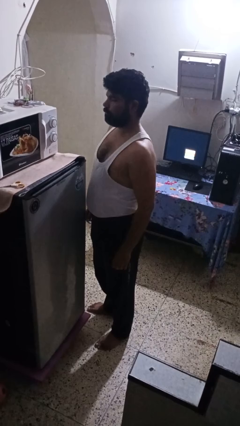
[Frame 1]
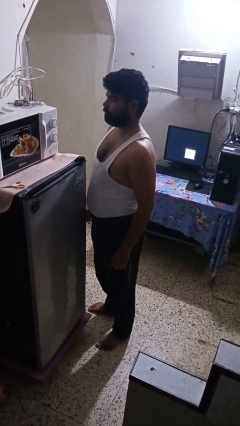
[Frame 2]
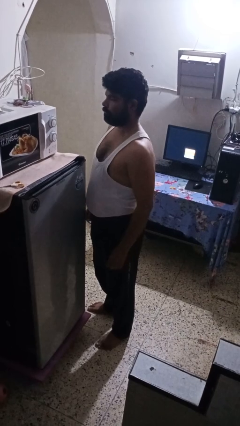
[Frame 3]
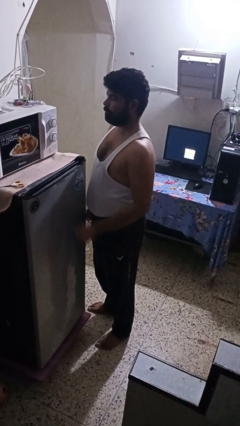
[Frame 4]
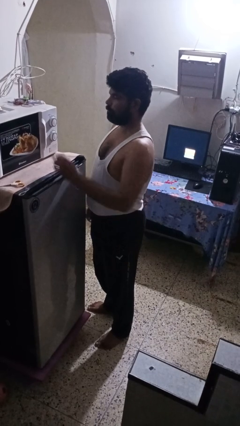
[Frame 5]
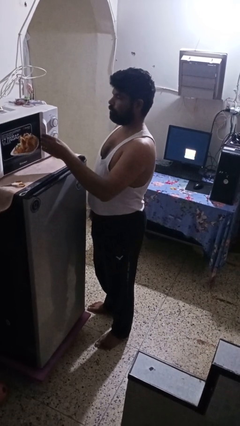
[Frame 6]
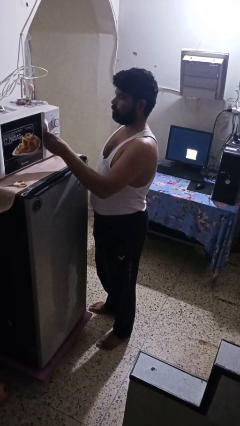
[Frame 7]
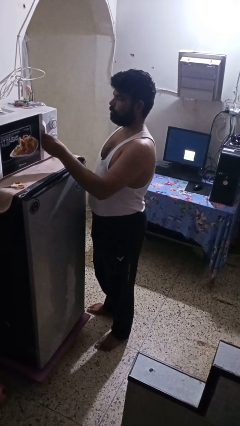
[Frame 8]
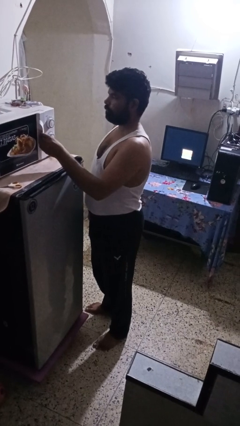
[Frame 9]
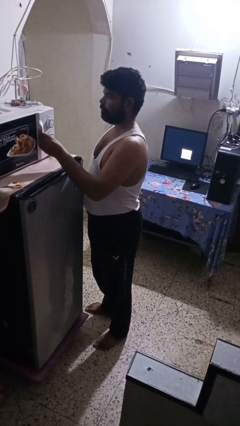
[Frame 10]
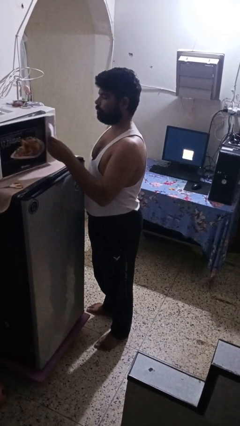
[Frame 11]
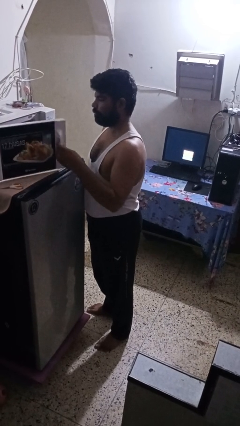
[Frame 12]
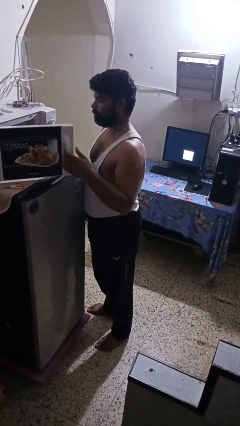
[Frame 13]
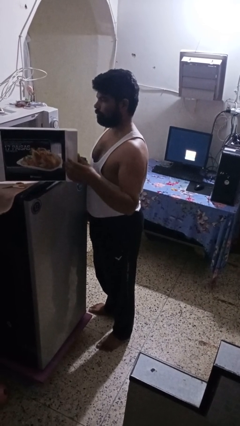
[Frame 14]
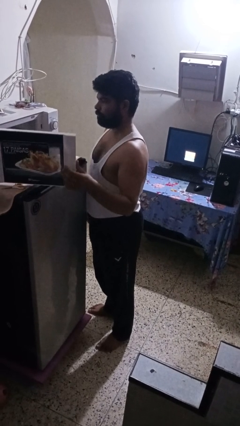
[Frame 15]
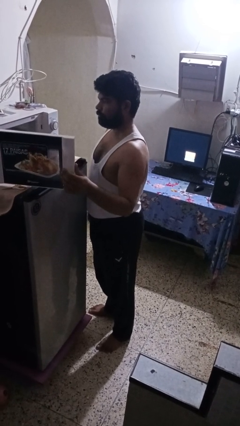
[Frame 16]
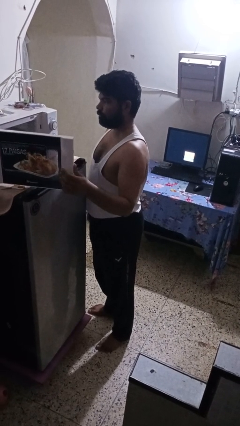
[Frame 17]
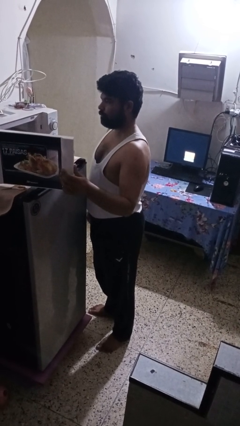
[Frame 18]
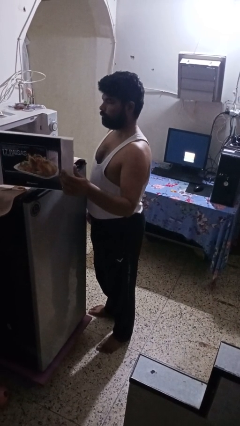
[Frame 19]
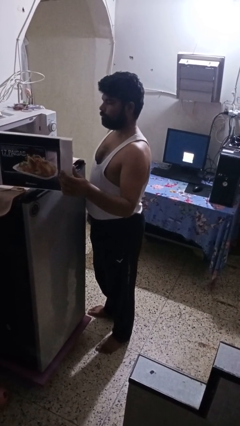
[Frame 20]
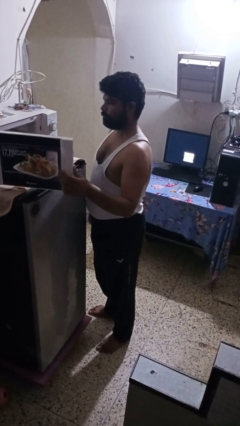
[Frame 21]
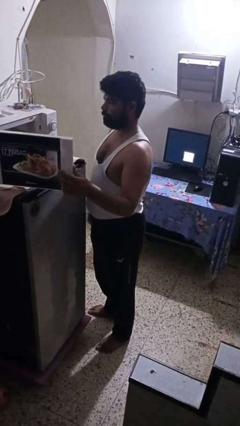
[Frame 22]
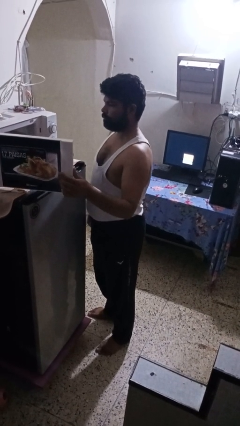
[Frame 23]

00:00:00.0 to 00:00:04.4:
person opens microwave

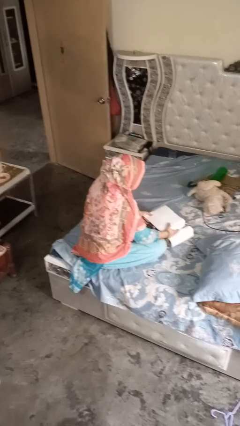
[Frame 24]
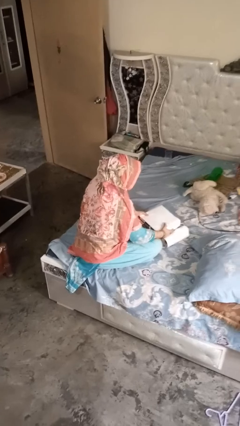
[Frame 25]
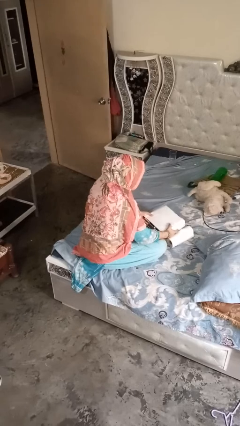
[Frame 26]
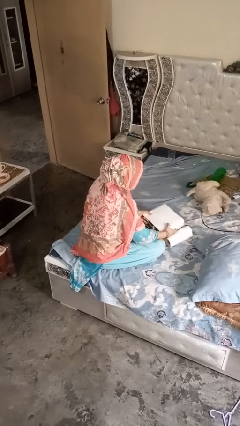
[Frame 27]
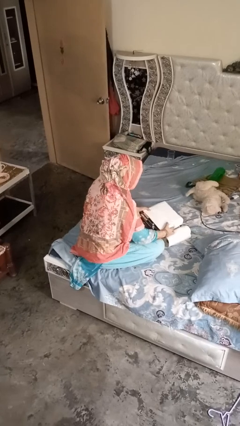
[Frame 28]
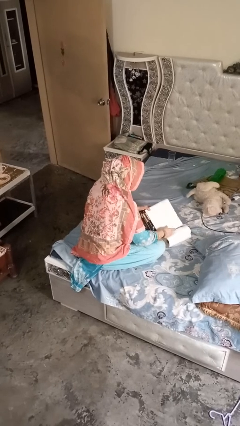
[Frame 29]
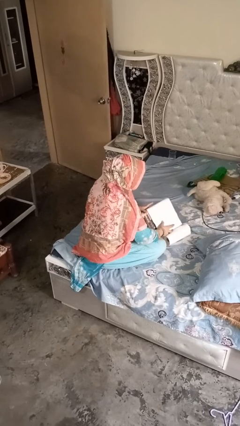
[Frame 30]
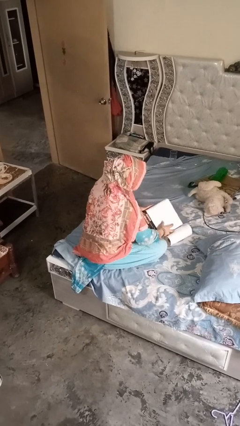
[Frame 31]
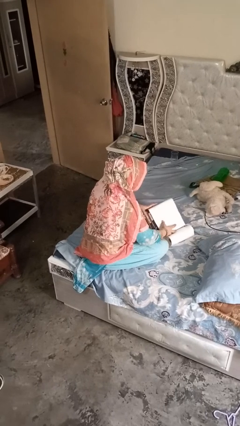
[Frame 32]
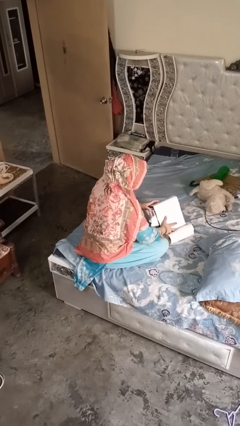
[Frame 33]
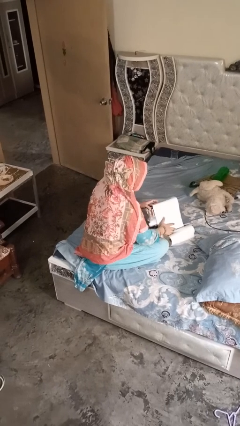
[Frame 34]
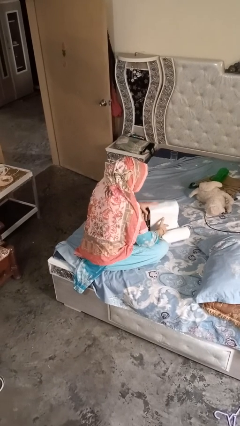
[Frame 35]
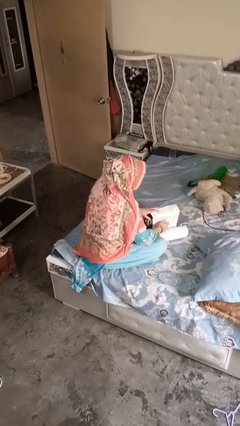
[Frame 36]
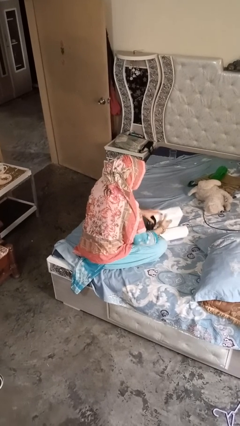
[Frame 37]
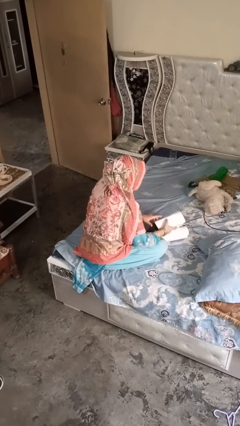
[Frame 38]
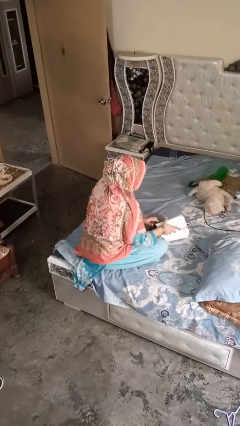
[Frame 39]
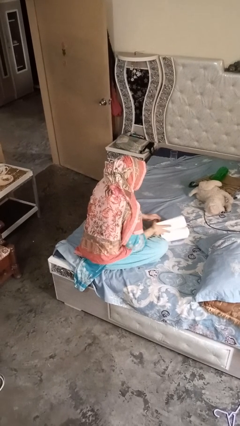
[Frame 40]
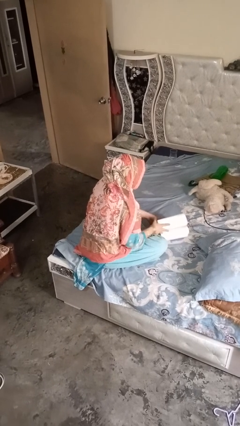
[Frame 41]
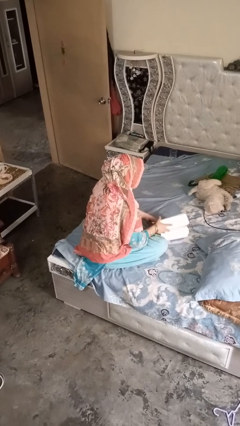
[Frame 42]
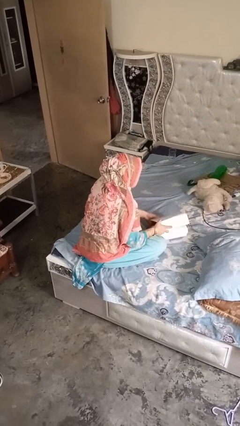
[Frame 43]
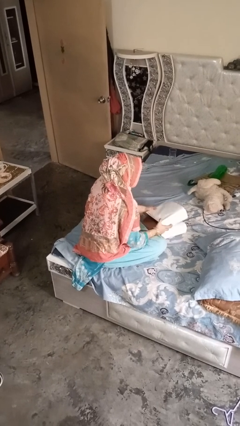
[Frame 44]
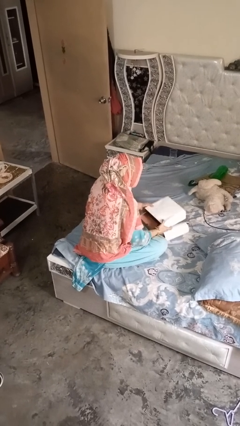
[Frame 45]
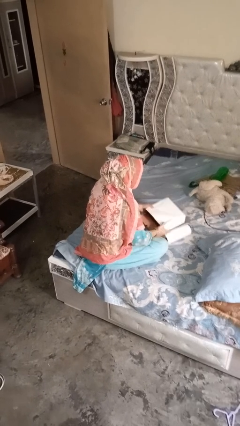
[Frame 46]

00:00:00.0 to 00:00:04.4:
person wraps box

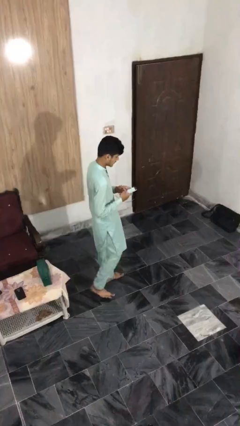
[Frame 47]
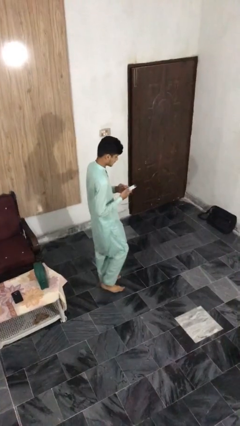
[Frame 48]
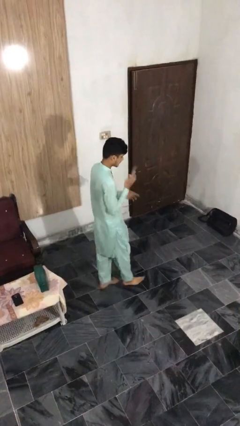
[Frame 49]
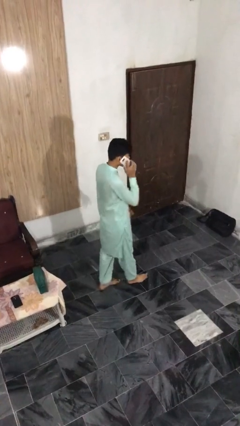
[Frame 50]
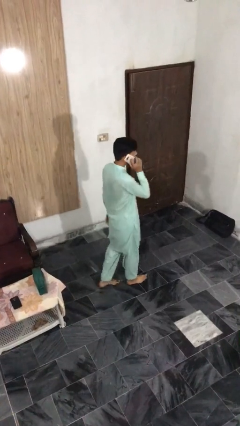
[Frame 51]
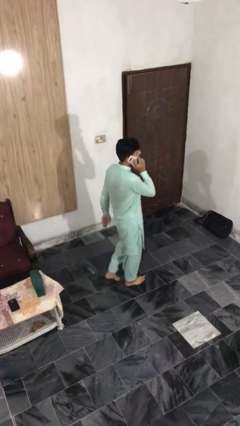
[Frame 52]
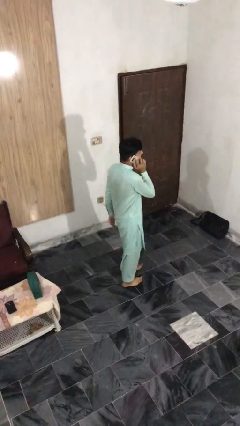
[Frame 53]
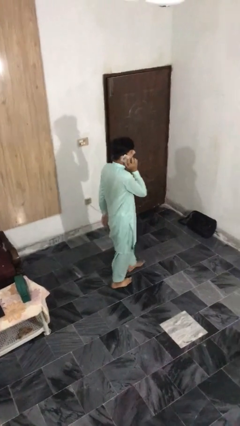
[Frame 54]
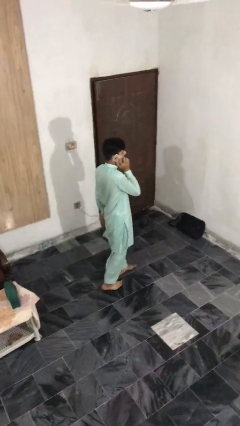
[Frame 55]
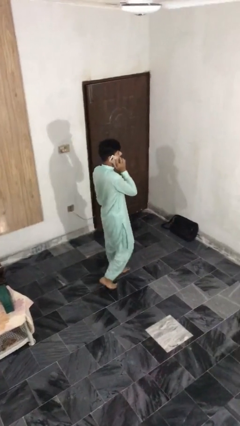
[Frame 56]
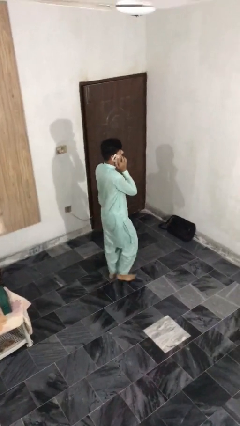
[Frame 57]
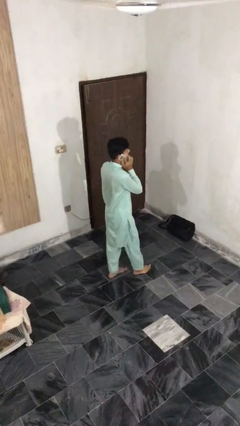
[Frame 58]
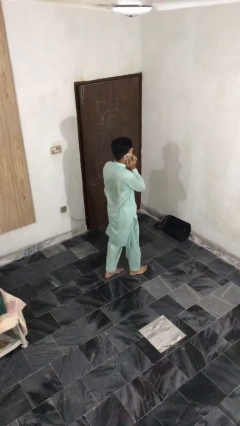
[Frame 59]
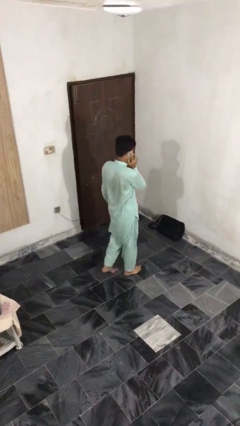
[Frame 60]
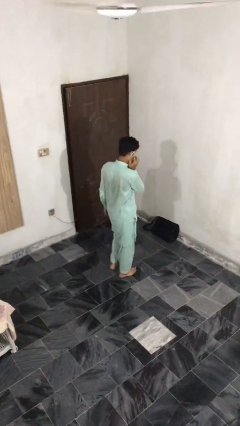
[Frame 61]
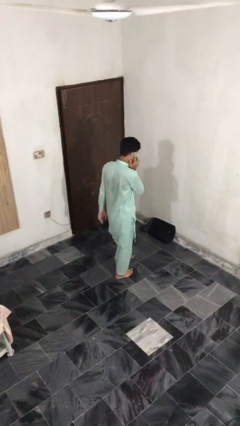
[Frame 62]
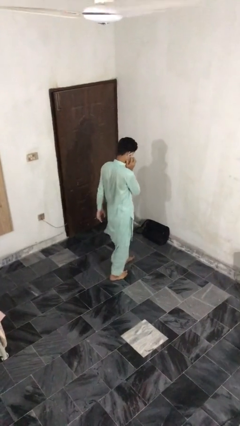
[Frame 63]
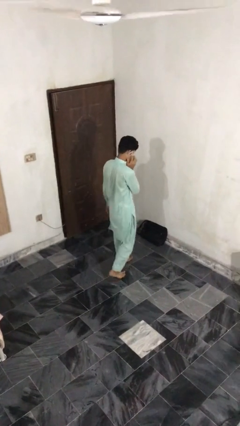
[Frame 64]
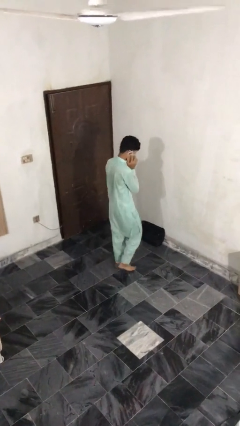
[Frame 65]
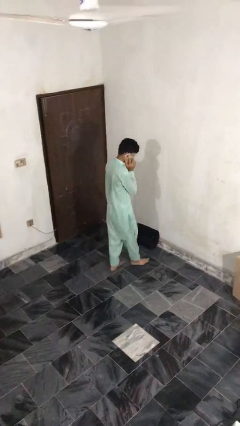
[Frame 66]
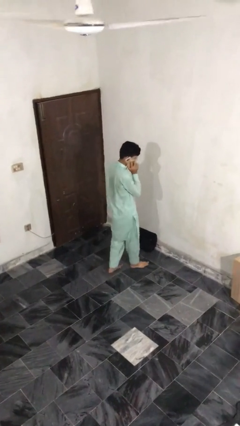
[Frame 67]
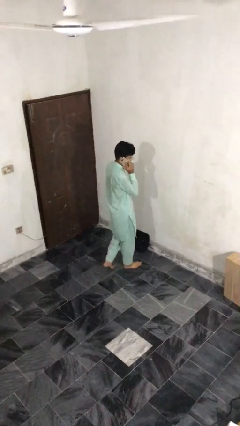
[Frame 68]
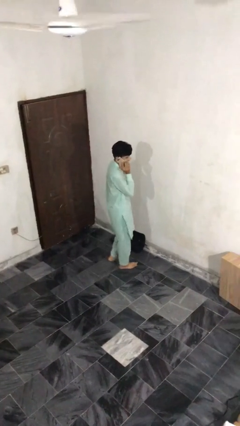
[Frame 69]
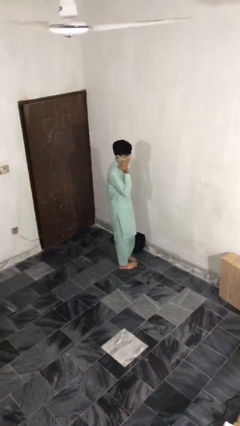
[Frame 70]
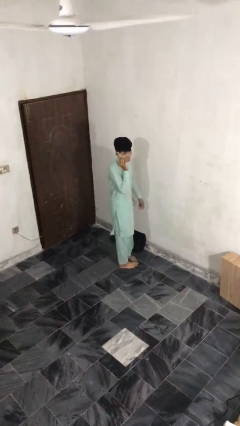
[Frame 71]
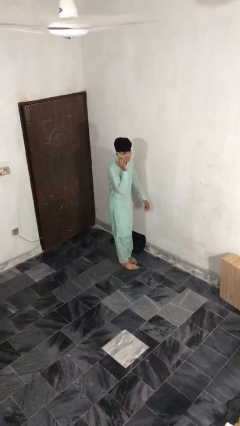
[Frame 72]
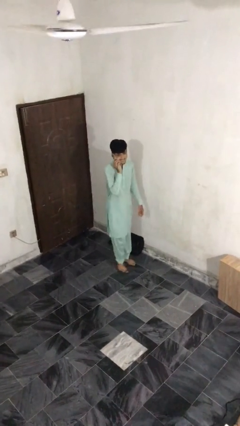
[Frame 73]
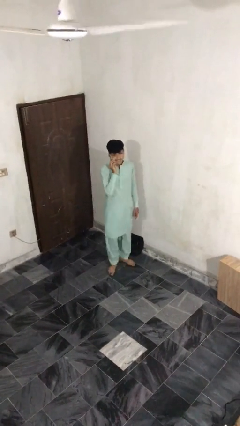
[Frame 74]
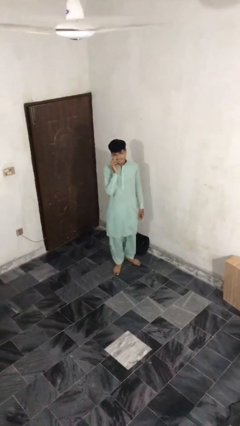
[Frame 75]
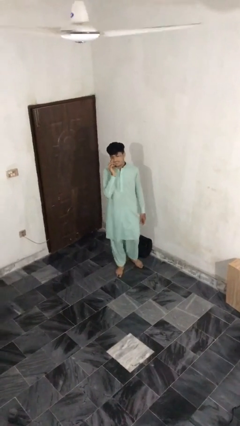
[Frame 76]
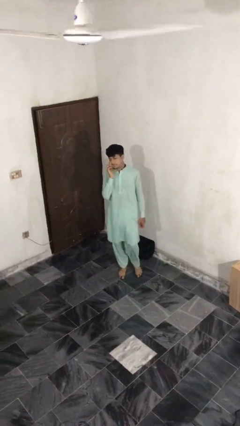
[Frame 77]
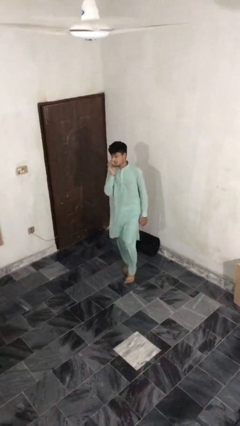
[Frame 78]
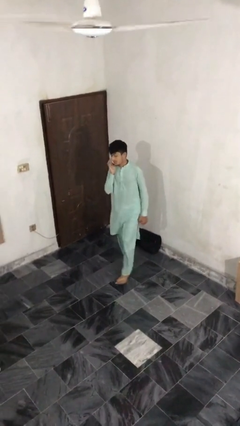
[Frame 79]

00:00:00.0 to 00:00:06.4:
person talks on phone

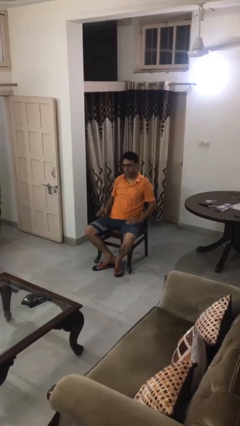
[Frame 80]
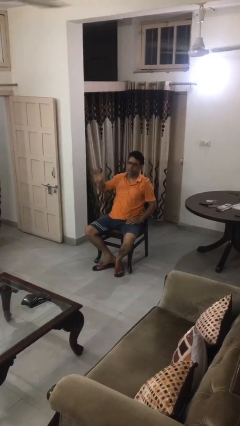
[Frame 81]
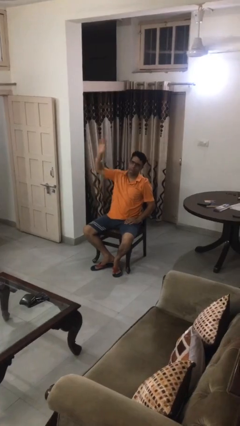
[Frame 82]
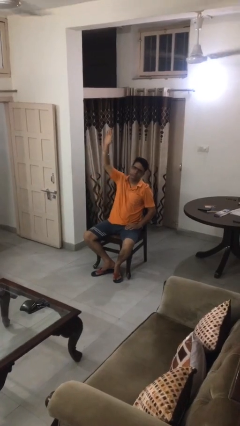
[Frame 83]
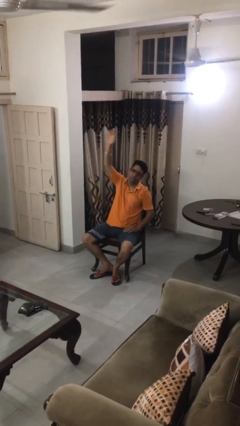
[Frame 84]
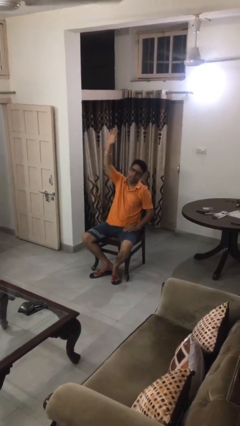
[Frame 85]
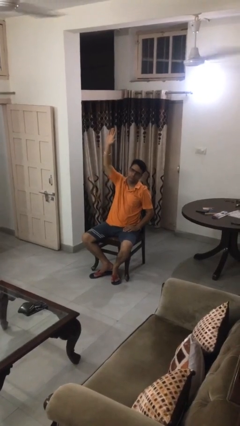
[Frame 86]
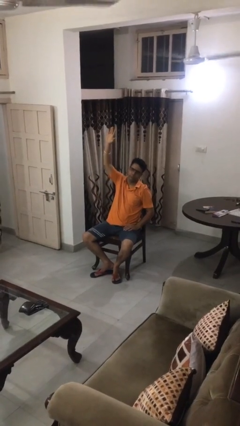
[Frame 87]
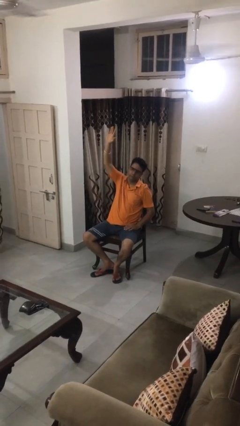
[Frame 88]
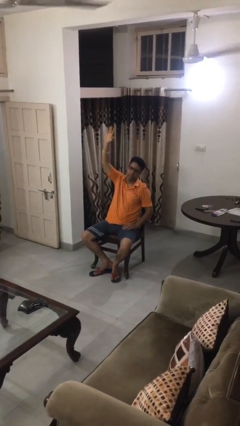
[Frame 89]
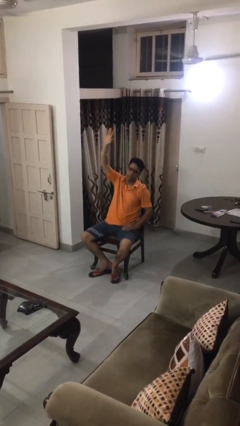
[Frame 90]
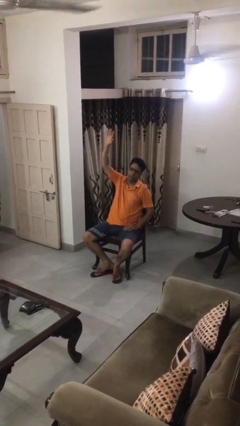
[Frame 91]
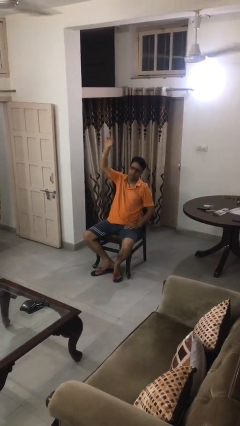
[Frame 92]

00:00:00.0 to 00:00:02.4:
person gestures raise hand

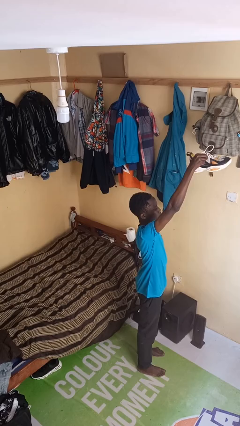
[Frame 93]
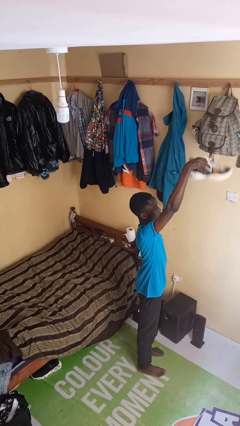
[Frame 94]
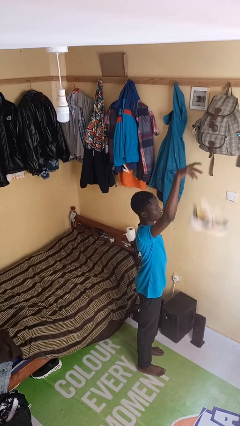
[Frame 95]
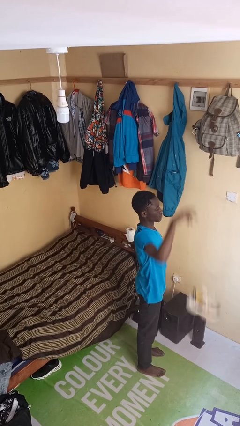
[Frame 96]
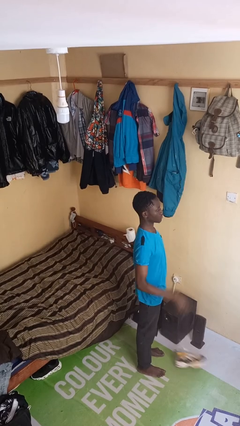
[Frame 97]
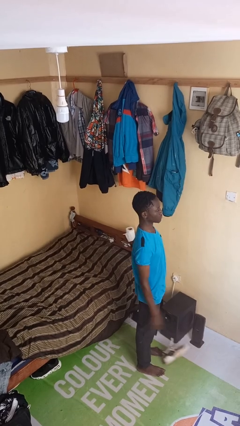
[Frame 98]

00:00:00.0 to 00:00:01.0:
person drops object
